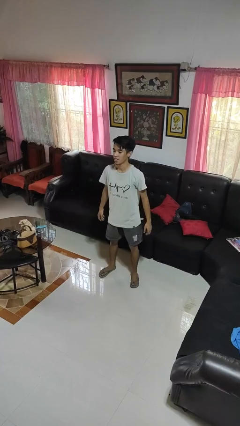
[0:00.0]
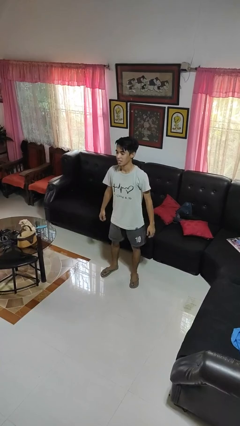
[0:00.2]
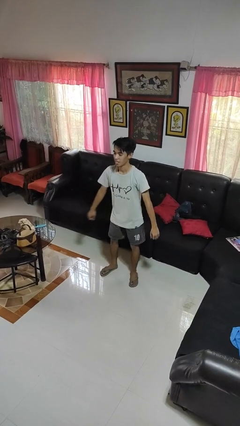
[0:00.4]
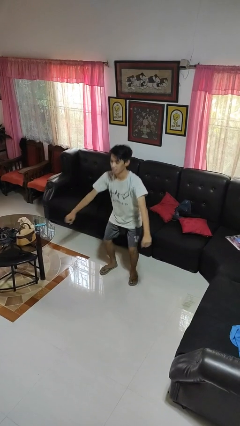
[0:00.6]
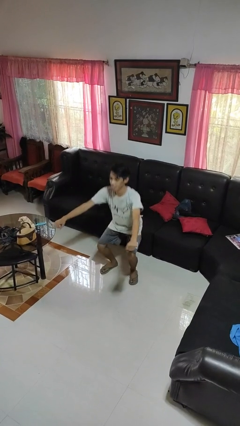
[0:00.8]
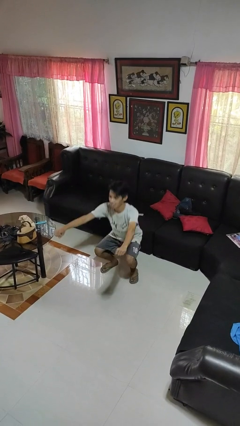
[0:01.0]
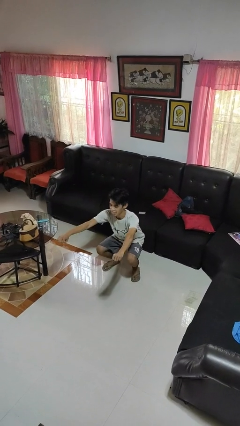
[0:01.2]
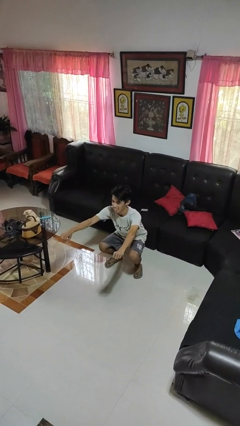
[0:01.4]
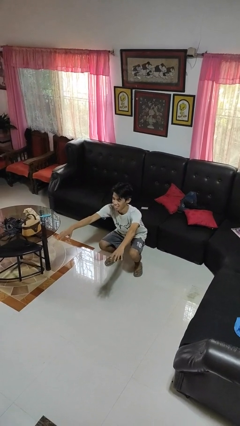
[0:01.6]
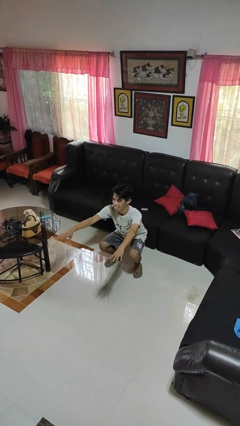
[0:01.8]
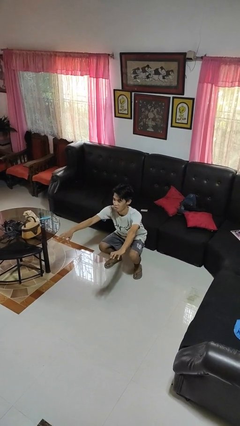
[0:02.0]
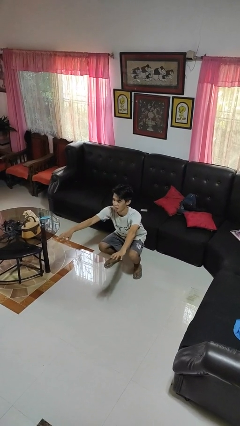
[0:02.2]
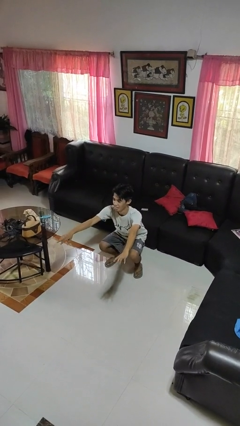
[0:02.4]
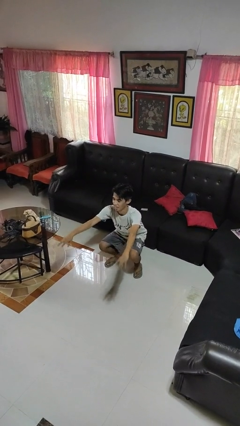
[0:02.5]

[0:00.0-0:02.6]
person squats

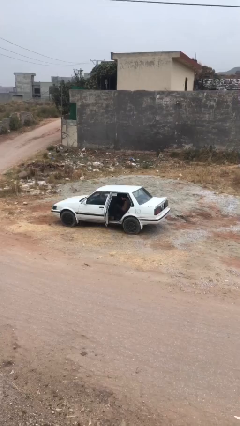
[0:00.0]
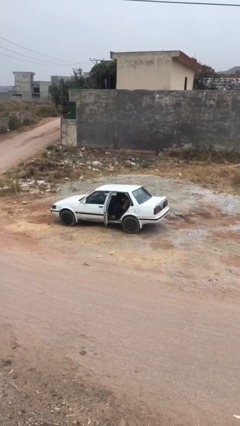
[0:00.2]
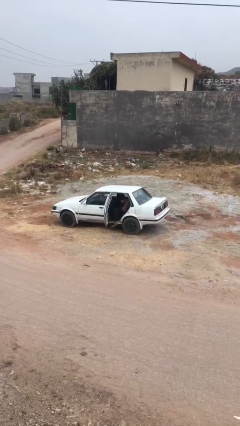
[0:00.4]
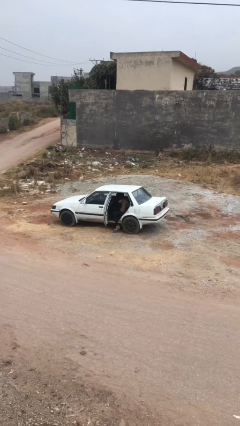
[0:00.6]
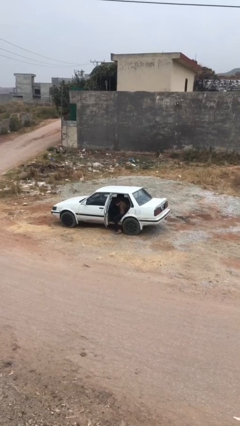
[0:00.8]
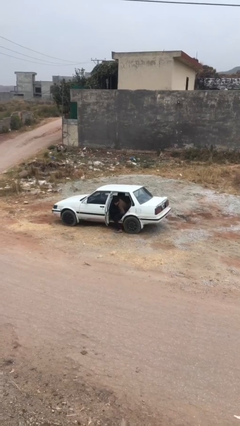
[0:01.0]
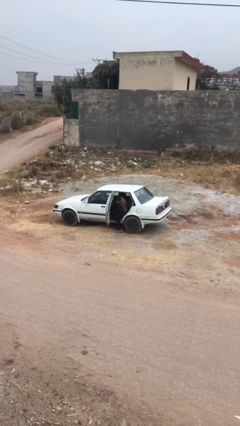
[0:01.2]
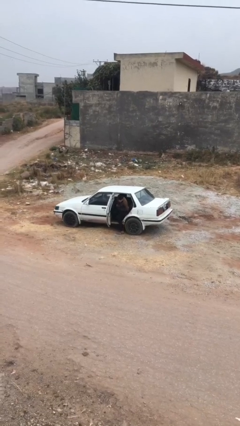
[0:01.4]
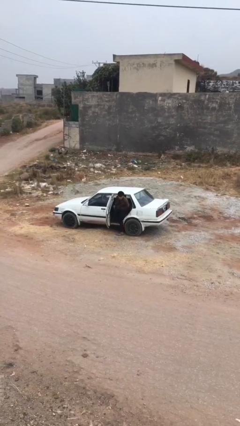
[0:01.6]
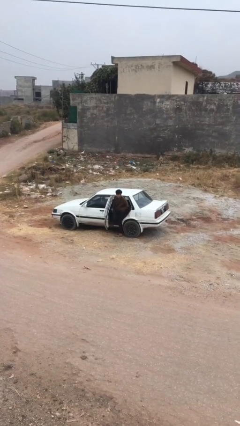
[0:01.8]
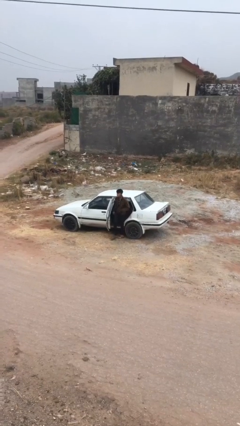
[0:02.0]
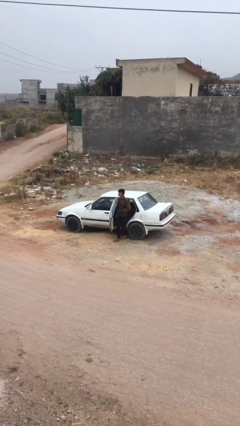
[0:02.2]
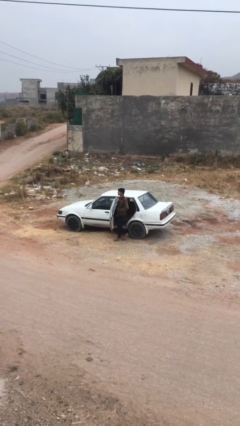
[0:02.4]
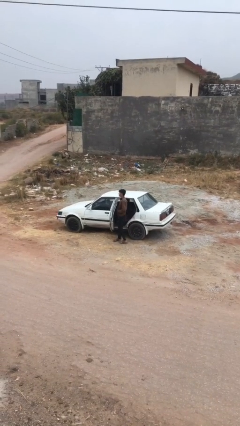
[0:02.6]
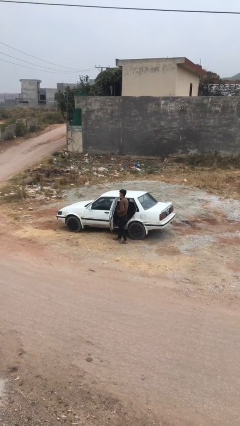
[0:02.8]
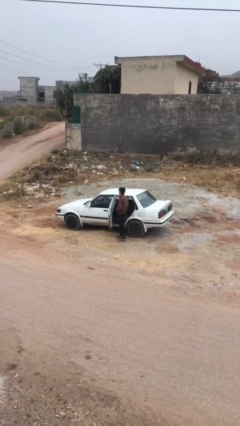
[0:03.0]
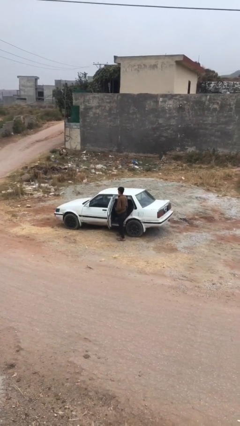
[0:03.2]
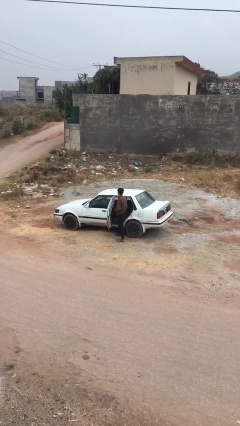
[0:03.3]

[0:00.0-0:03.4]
person exits car

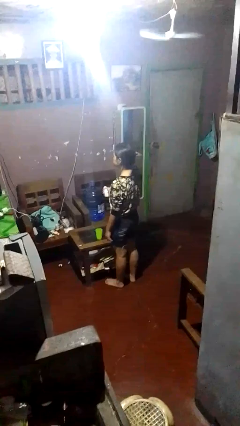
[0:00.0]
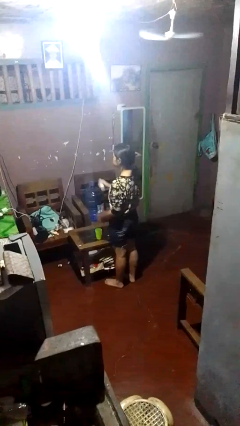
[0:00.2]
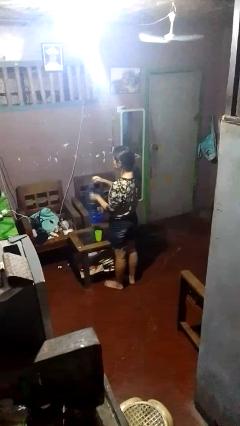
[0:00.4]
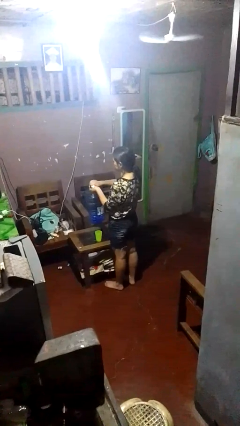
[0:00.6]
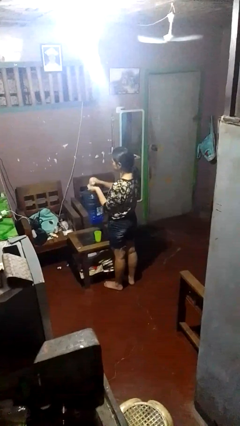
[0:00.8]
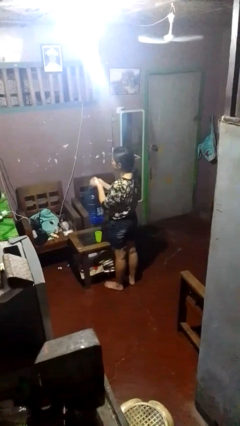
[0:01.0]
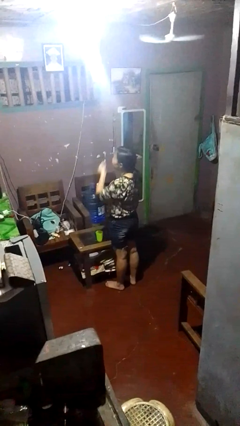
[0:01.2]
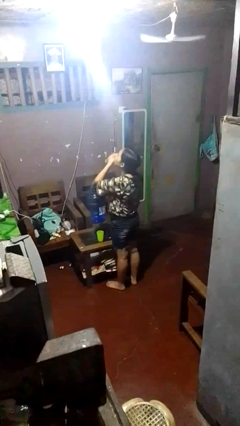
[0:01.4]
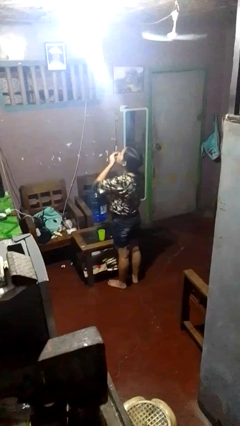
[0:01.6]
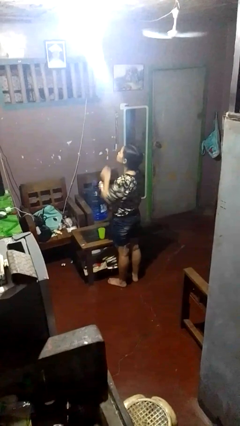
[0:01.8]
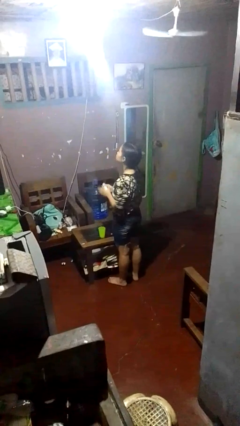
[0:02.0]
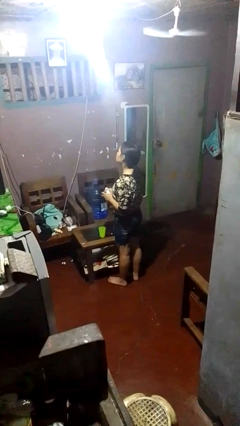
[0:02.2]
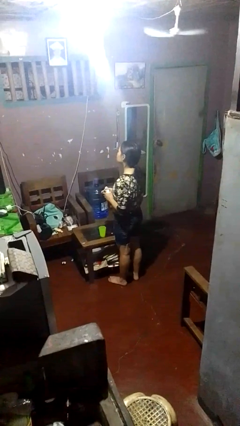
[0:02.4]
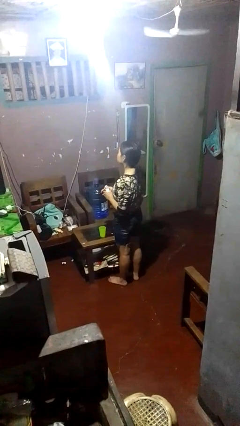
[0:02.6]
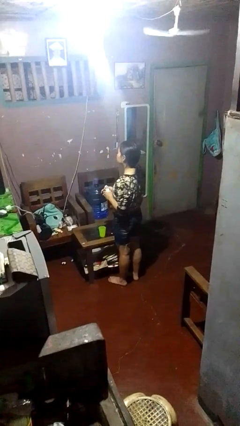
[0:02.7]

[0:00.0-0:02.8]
person takes medicine pills

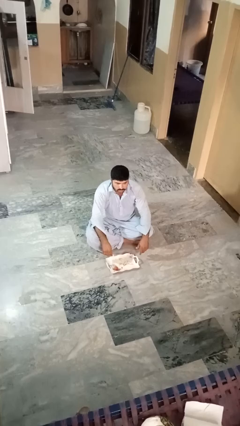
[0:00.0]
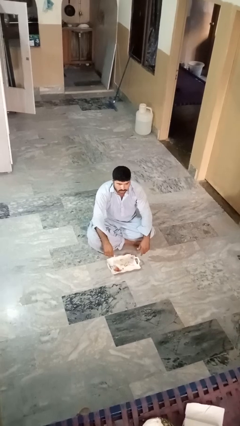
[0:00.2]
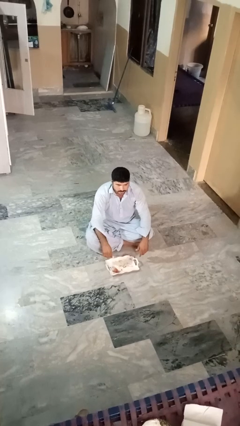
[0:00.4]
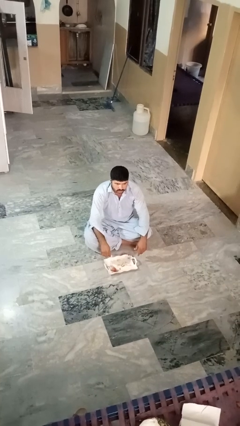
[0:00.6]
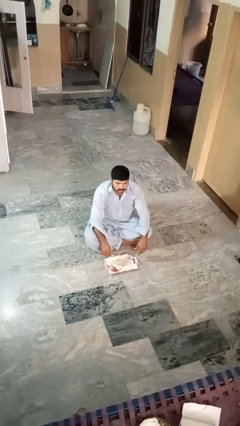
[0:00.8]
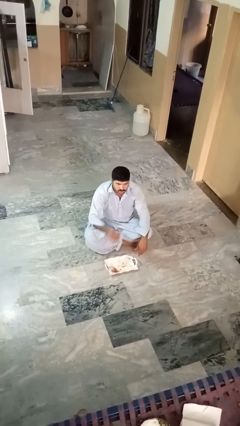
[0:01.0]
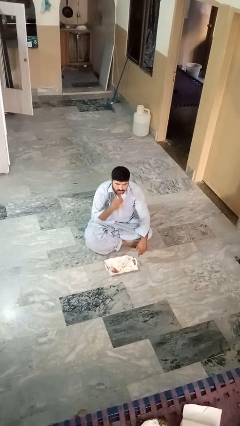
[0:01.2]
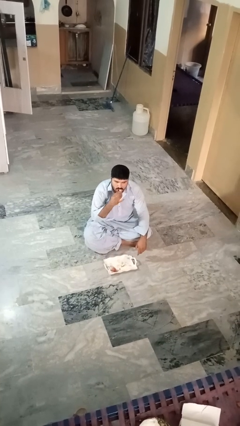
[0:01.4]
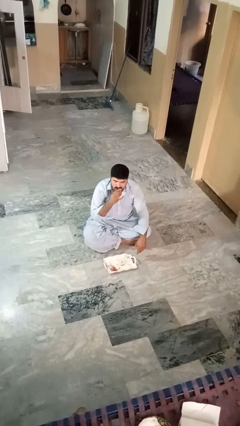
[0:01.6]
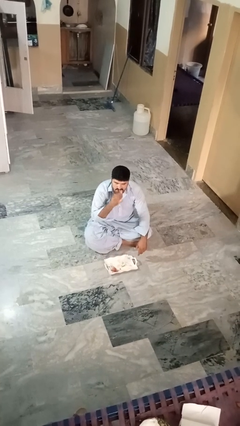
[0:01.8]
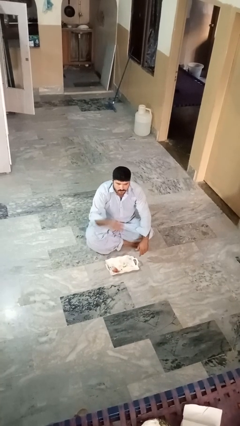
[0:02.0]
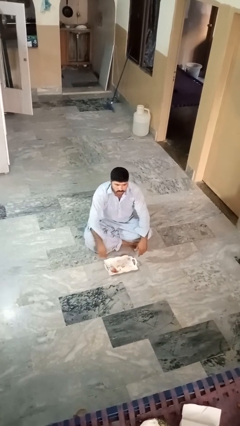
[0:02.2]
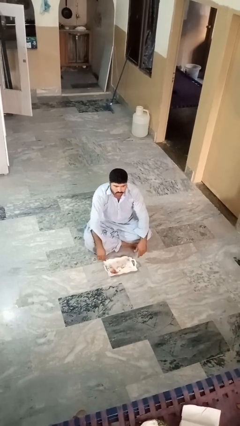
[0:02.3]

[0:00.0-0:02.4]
person eats apple

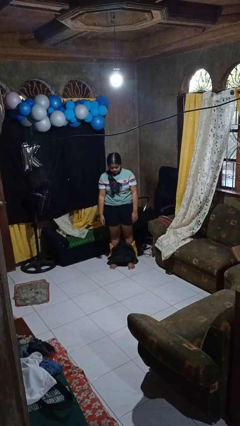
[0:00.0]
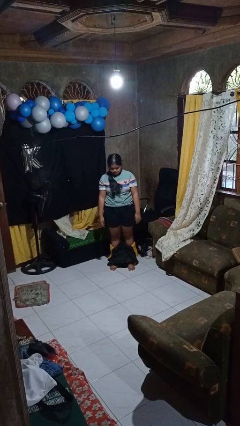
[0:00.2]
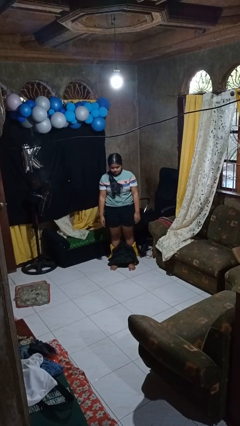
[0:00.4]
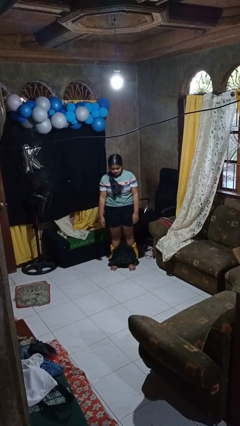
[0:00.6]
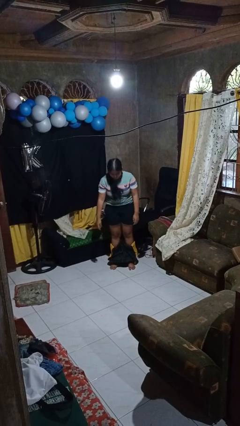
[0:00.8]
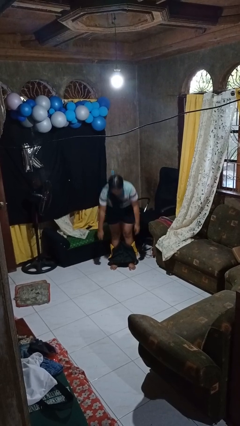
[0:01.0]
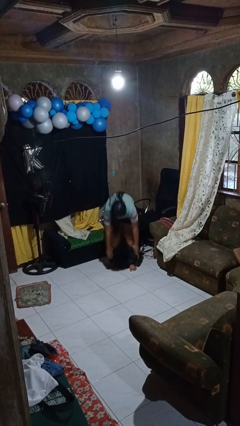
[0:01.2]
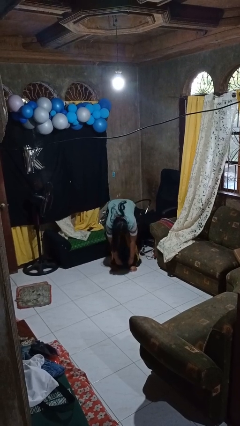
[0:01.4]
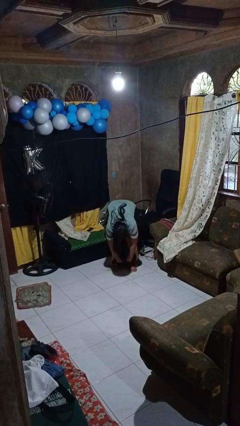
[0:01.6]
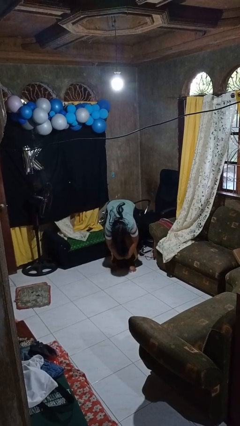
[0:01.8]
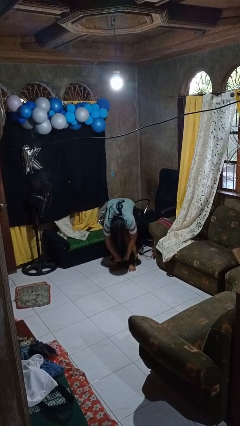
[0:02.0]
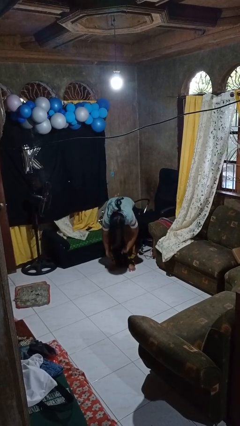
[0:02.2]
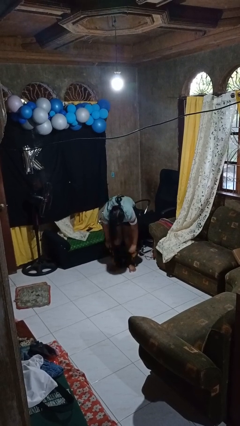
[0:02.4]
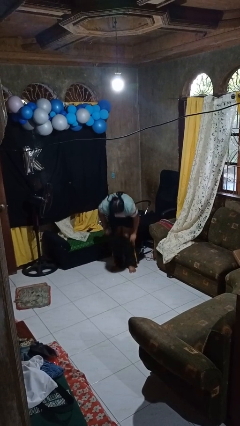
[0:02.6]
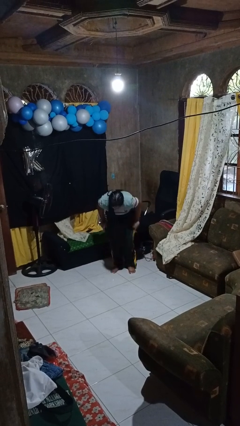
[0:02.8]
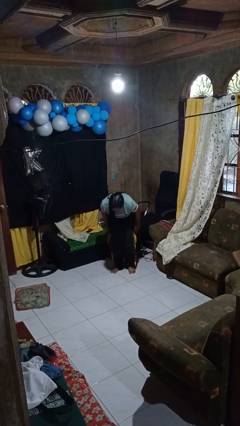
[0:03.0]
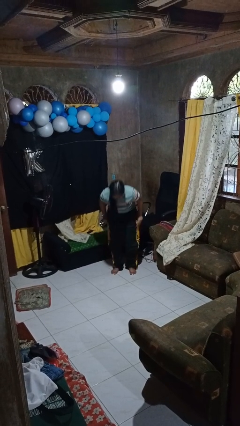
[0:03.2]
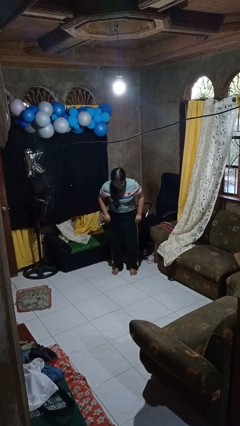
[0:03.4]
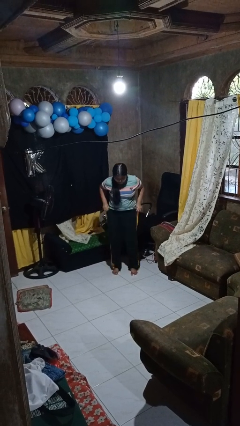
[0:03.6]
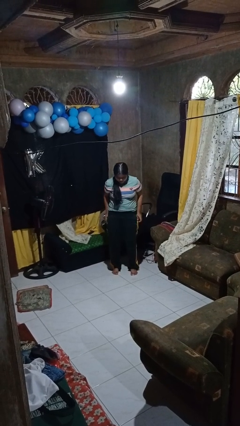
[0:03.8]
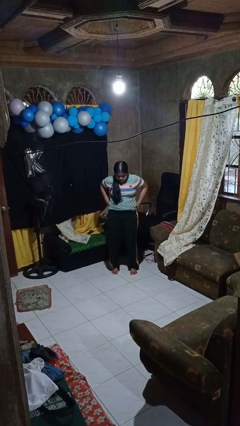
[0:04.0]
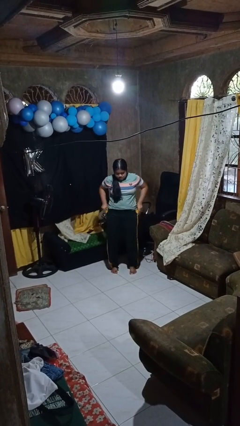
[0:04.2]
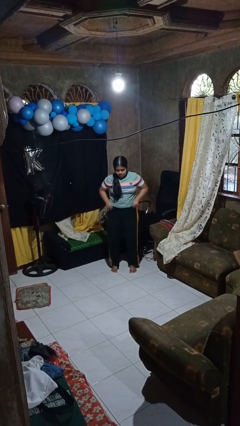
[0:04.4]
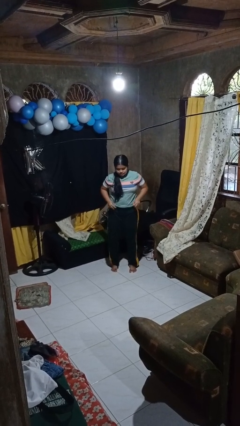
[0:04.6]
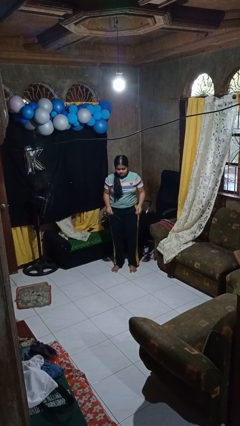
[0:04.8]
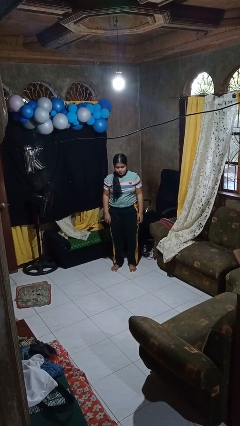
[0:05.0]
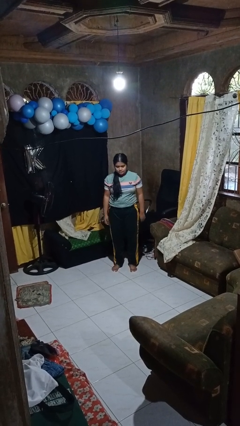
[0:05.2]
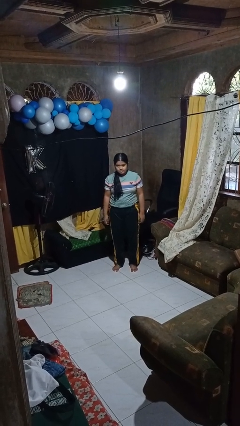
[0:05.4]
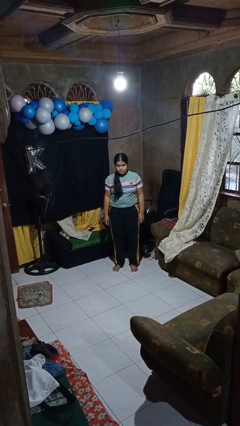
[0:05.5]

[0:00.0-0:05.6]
person puts on pants

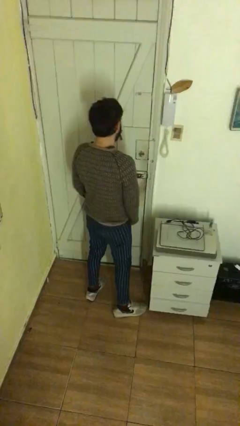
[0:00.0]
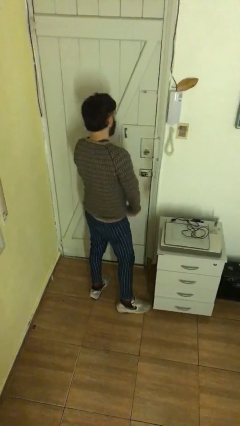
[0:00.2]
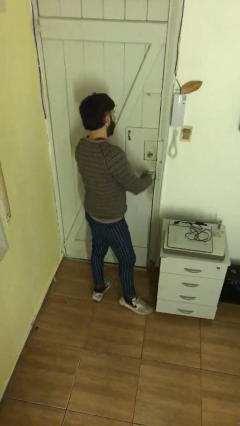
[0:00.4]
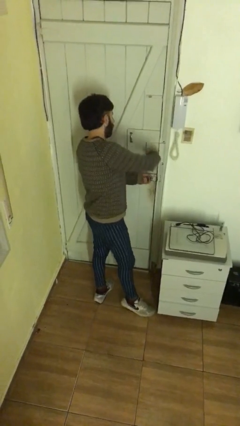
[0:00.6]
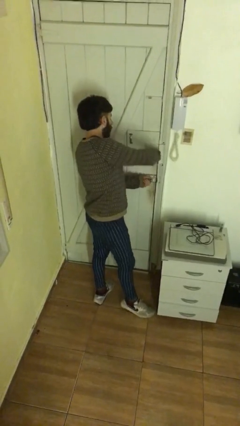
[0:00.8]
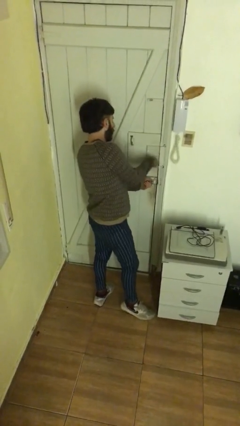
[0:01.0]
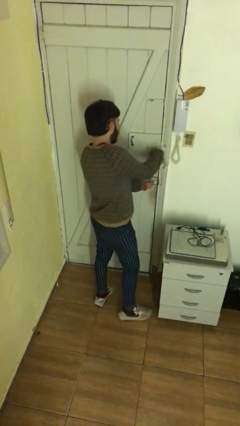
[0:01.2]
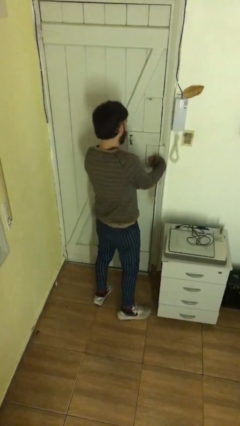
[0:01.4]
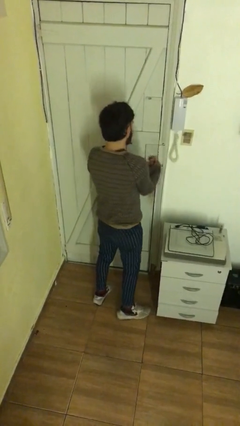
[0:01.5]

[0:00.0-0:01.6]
person unlocks door with keys
